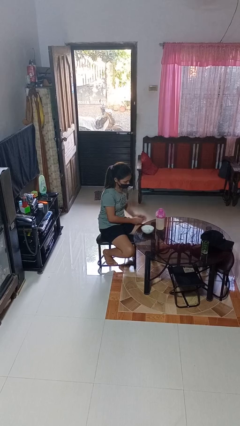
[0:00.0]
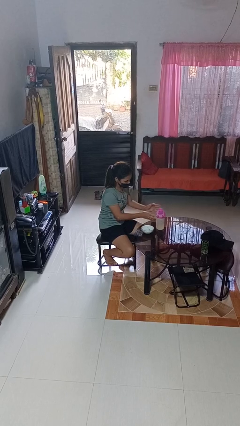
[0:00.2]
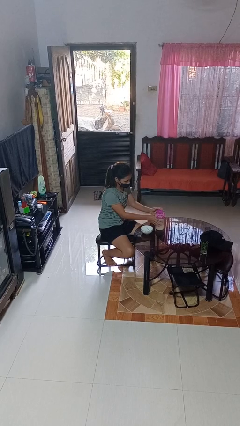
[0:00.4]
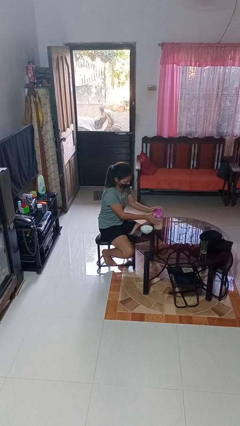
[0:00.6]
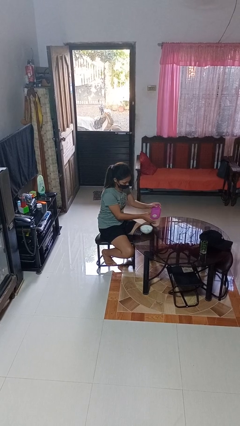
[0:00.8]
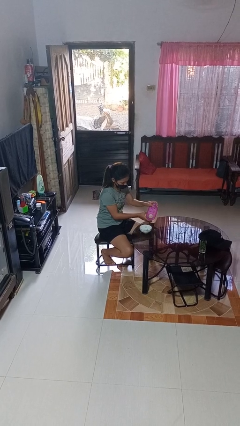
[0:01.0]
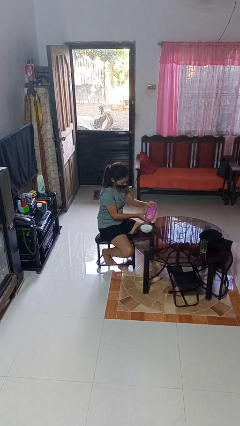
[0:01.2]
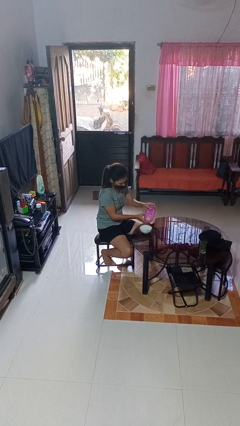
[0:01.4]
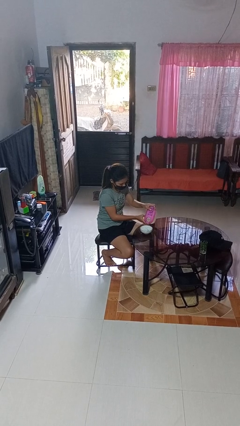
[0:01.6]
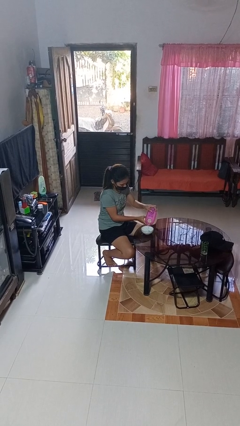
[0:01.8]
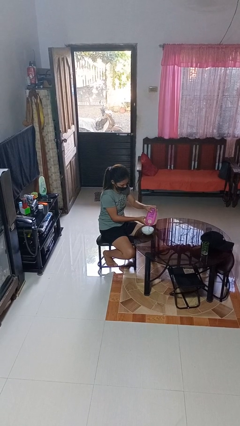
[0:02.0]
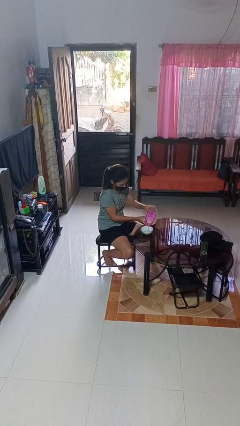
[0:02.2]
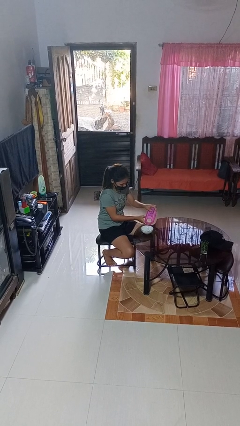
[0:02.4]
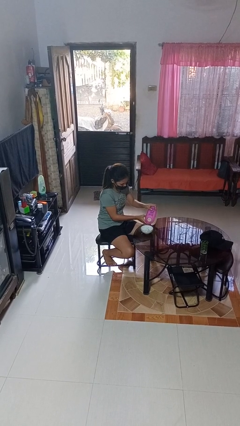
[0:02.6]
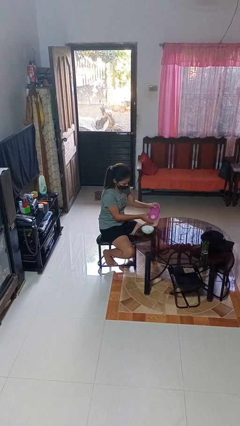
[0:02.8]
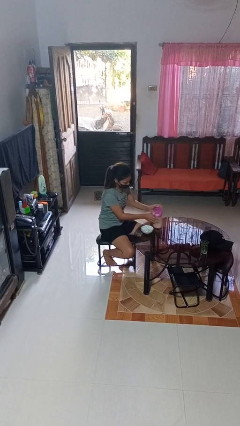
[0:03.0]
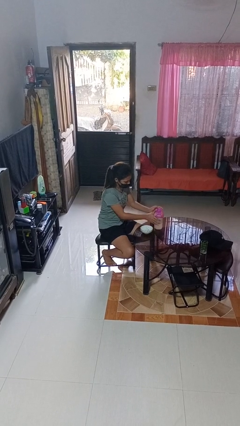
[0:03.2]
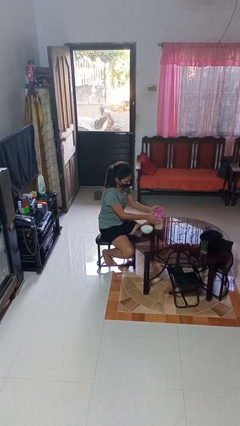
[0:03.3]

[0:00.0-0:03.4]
person pours into bowl

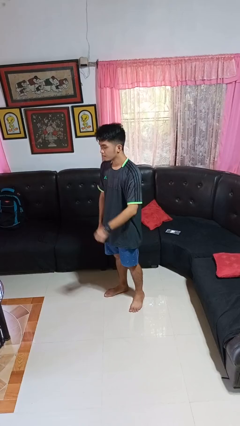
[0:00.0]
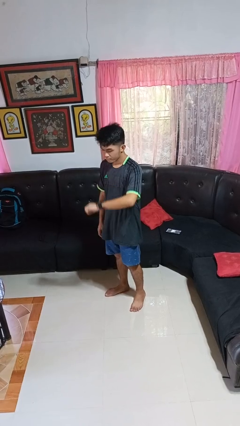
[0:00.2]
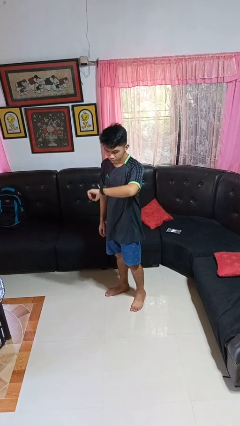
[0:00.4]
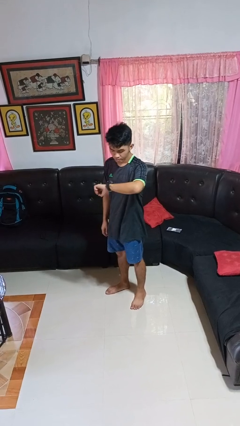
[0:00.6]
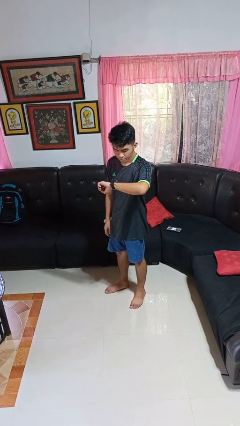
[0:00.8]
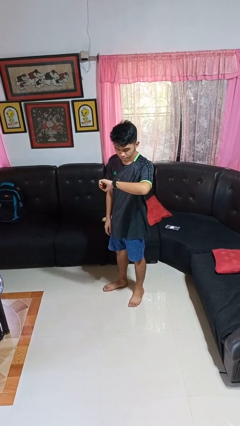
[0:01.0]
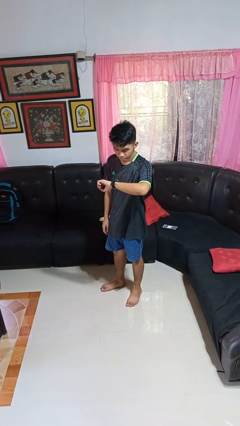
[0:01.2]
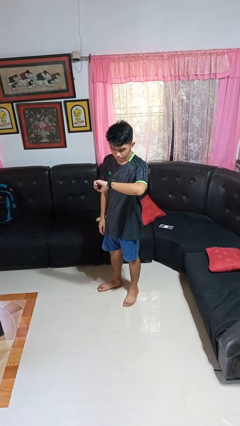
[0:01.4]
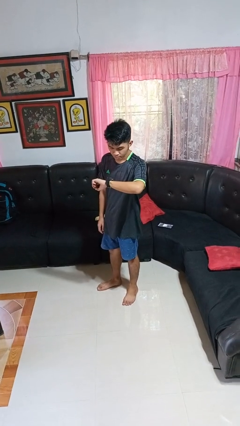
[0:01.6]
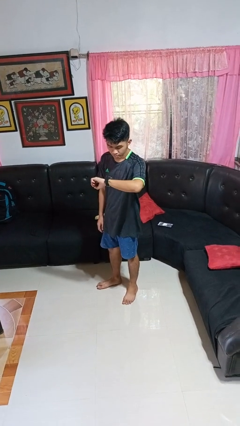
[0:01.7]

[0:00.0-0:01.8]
person looks at wristwatch

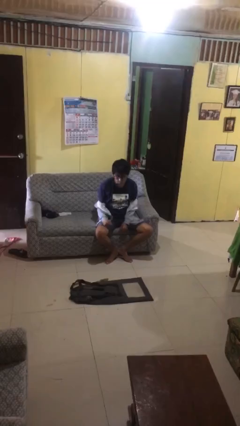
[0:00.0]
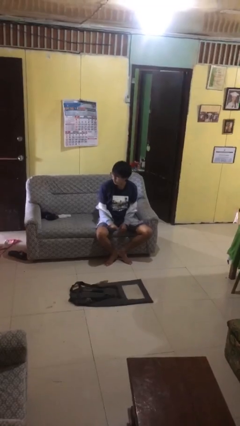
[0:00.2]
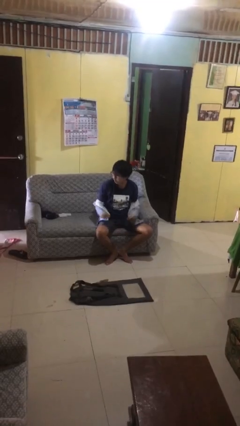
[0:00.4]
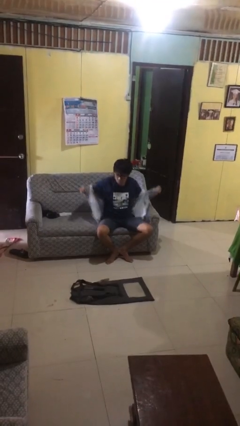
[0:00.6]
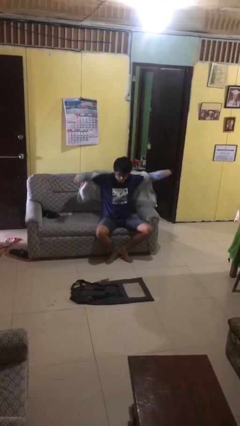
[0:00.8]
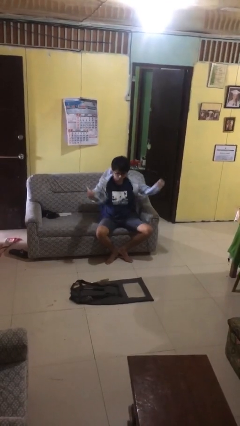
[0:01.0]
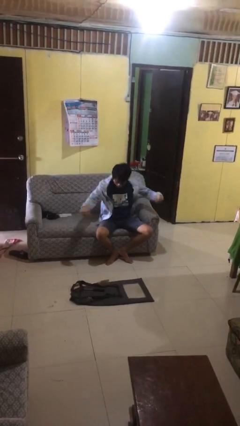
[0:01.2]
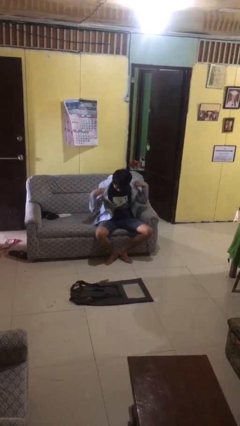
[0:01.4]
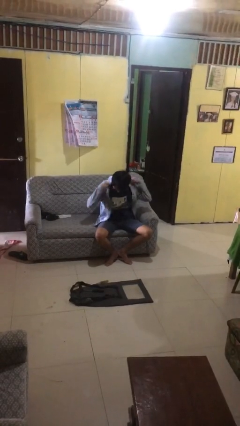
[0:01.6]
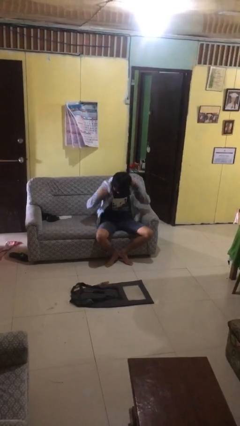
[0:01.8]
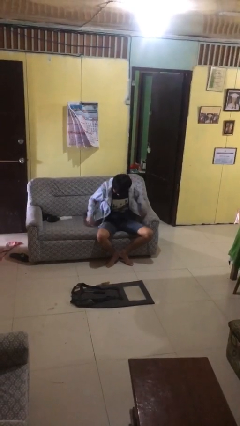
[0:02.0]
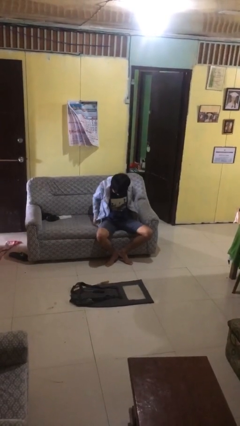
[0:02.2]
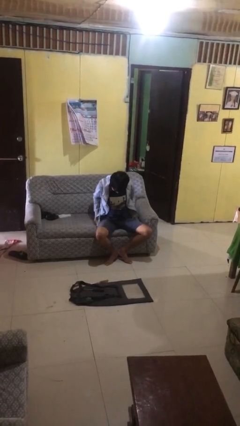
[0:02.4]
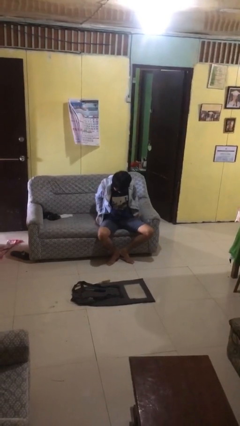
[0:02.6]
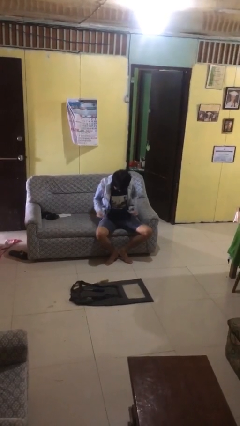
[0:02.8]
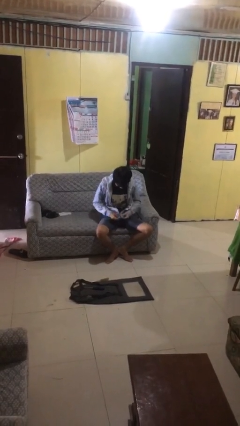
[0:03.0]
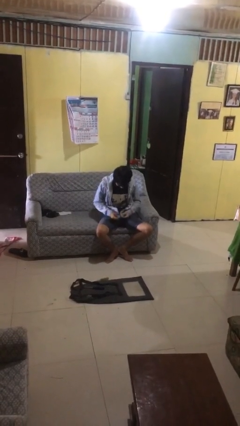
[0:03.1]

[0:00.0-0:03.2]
person puts on jacket

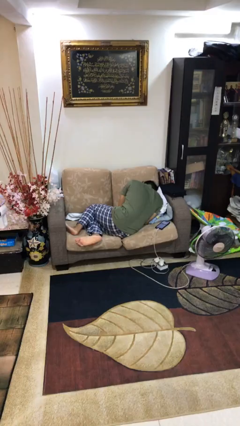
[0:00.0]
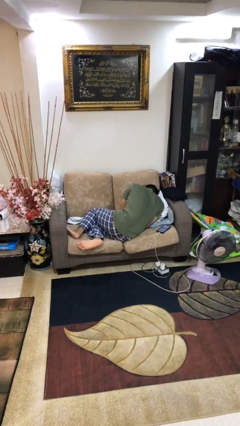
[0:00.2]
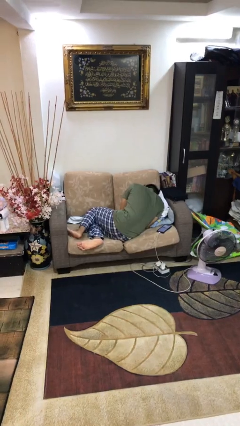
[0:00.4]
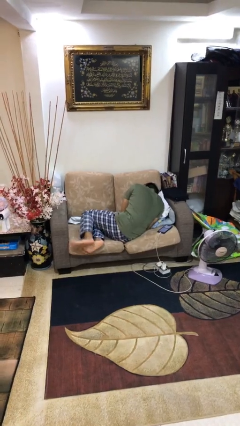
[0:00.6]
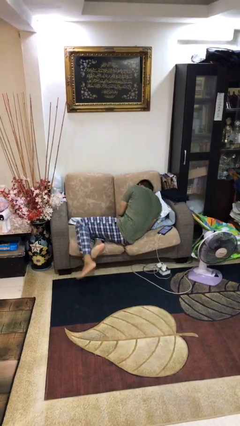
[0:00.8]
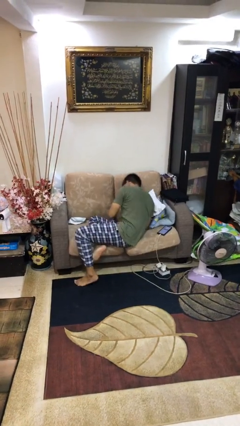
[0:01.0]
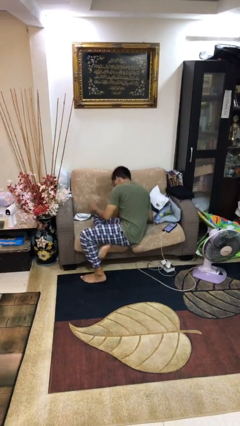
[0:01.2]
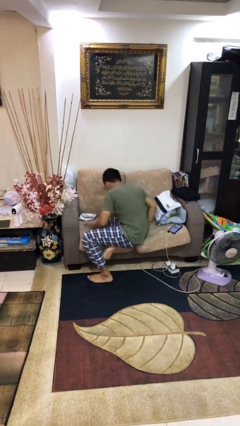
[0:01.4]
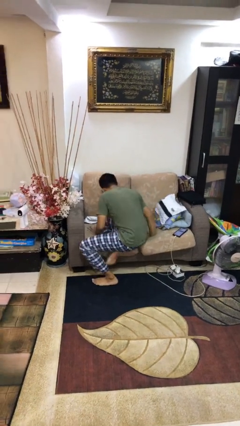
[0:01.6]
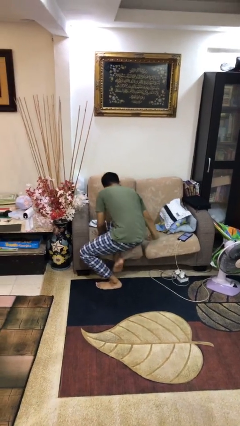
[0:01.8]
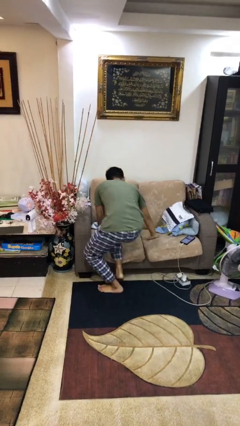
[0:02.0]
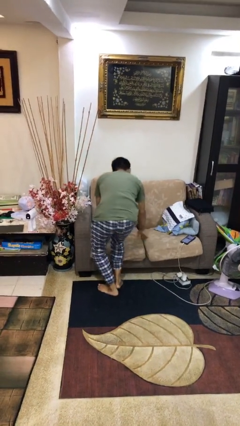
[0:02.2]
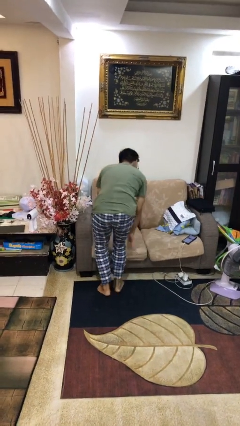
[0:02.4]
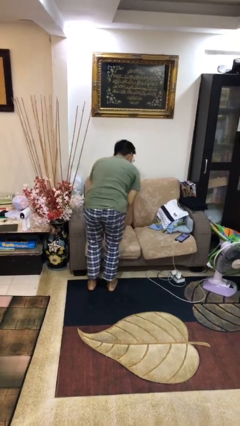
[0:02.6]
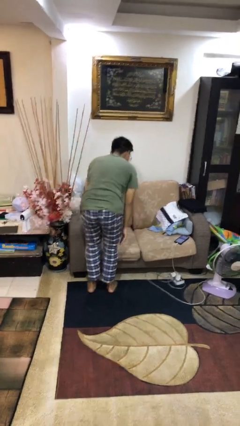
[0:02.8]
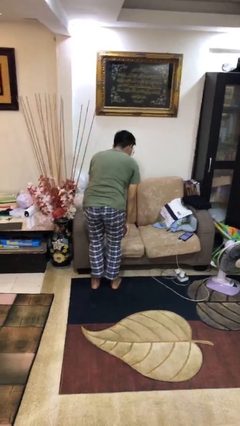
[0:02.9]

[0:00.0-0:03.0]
person stands up

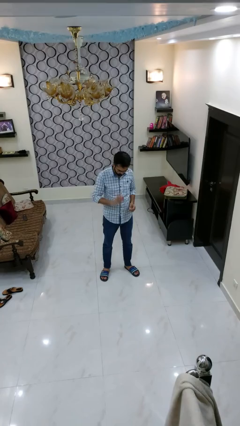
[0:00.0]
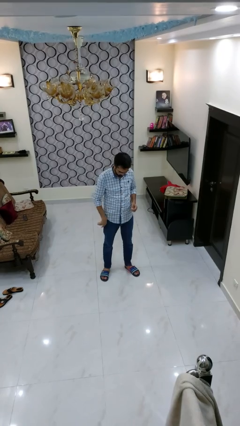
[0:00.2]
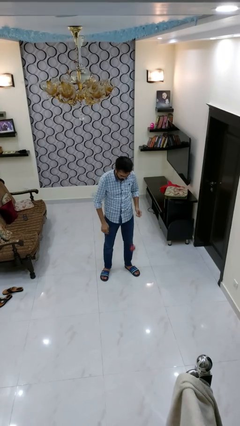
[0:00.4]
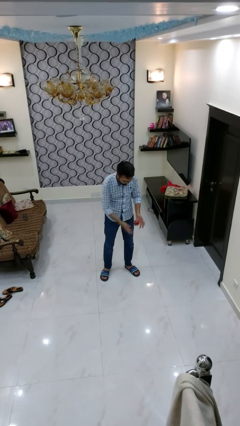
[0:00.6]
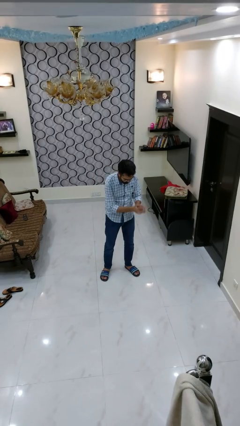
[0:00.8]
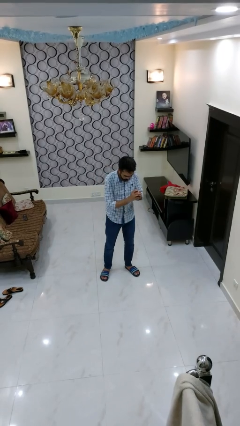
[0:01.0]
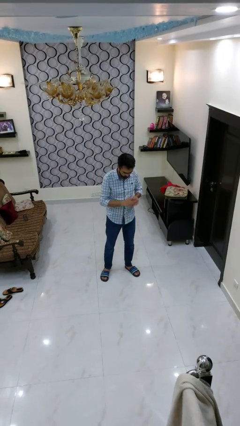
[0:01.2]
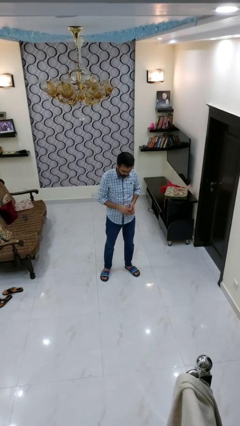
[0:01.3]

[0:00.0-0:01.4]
person bounces ball on floor

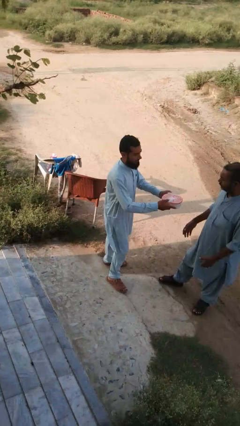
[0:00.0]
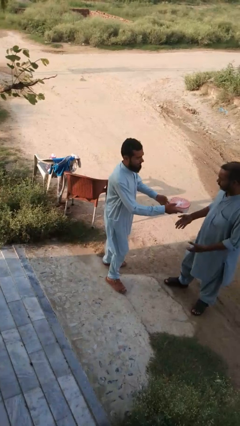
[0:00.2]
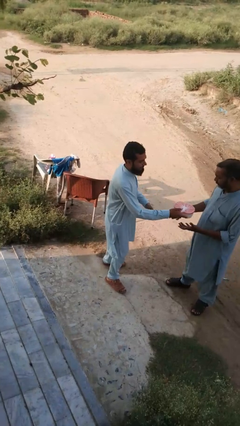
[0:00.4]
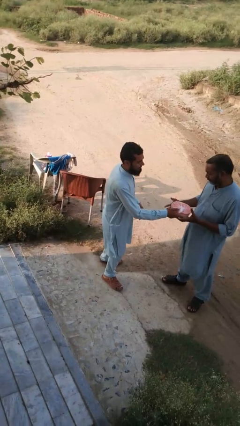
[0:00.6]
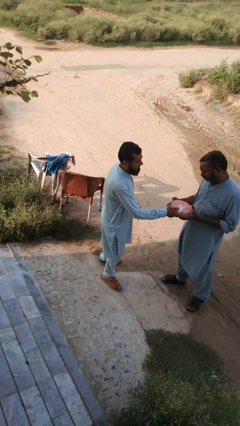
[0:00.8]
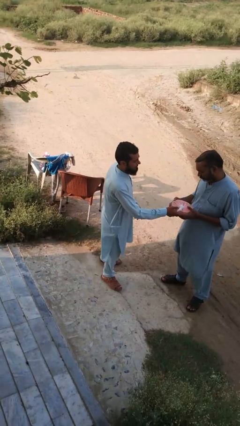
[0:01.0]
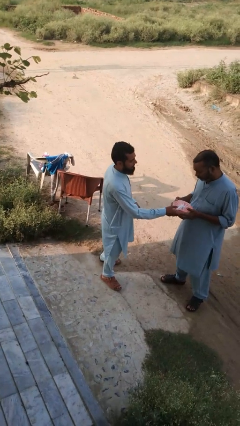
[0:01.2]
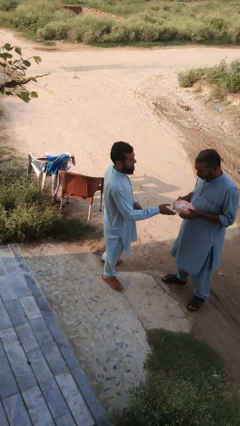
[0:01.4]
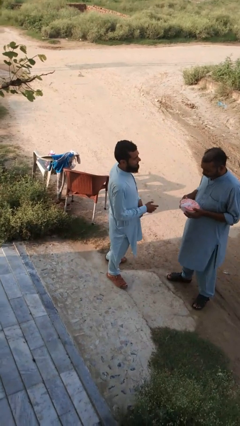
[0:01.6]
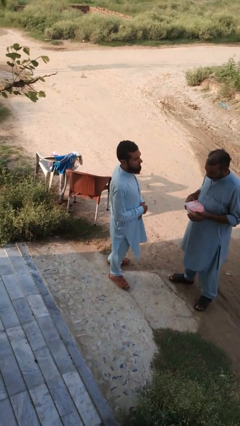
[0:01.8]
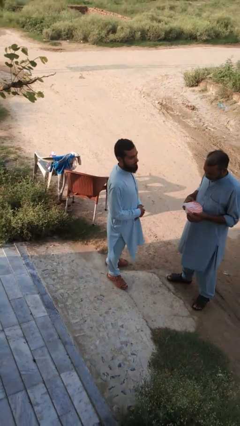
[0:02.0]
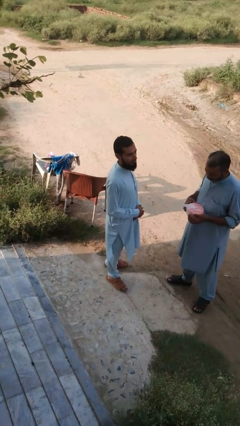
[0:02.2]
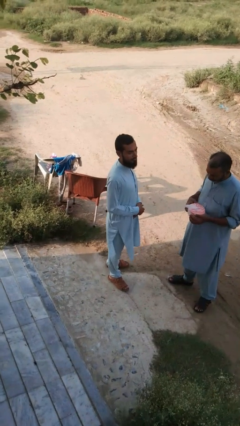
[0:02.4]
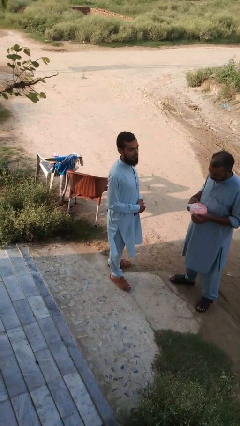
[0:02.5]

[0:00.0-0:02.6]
person transfers object to person

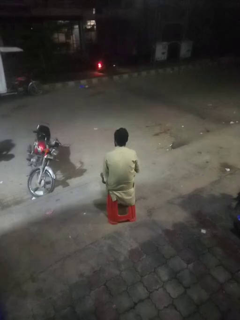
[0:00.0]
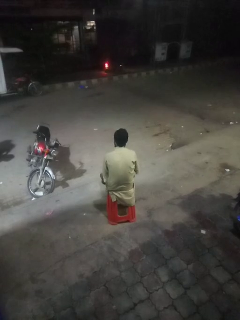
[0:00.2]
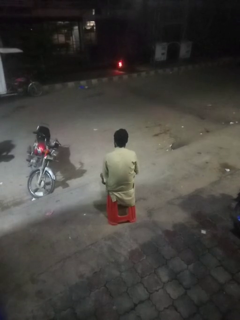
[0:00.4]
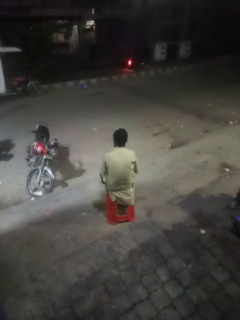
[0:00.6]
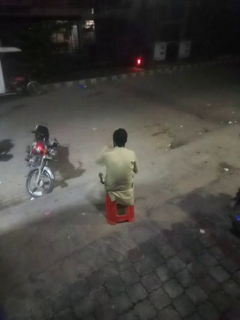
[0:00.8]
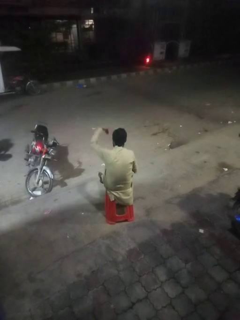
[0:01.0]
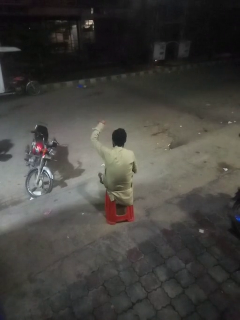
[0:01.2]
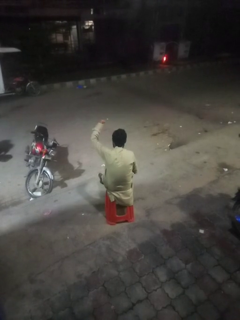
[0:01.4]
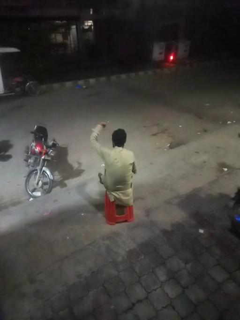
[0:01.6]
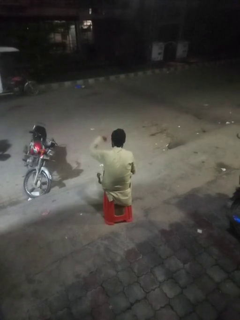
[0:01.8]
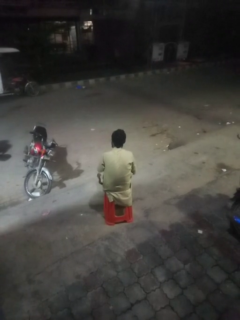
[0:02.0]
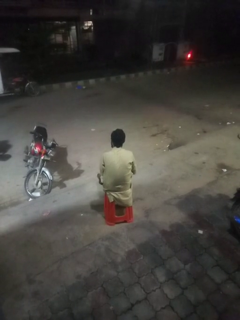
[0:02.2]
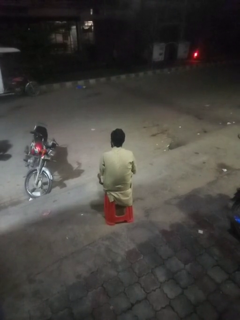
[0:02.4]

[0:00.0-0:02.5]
person gestures hang loose

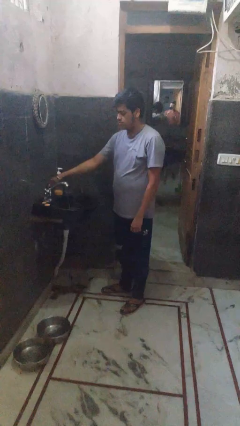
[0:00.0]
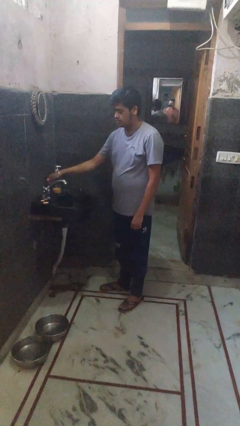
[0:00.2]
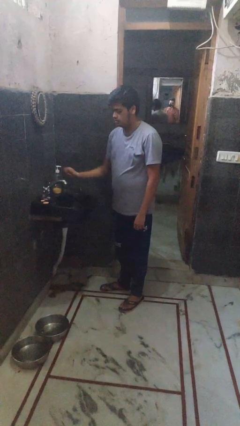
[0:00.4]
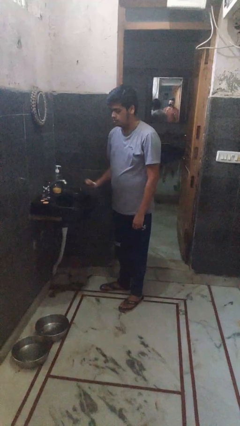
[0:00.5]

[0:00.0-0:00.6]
person turns off faucet
